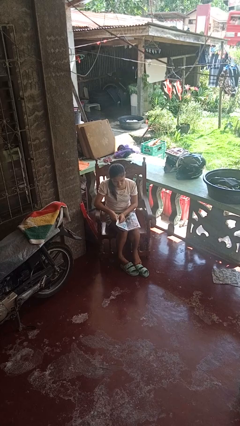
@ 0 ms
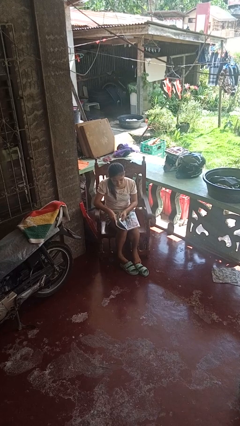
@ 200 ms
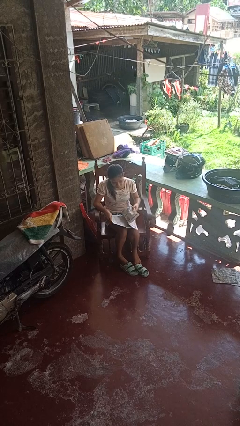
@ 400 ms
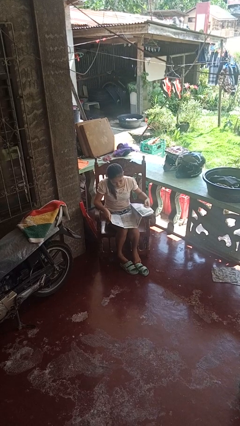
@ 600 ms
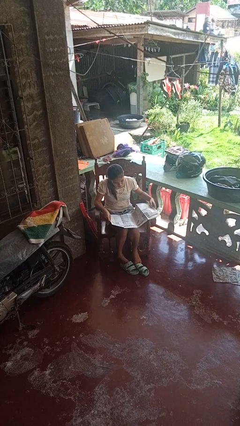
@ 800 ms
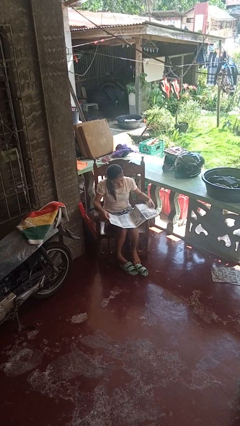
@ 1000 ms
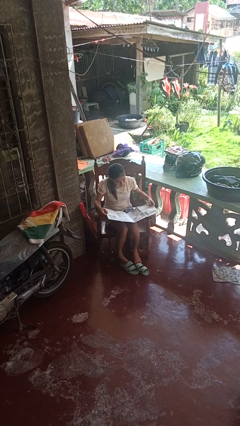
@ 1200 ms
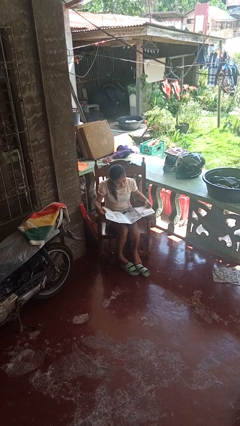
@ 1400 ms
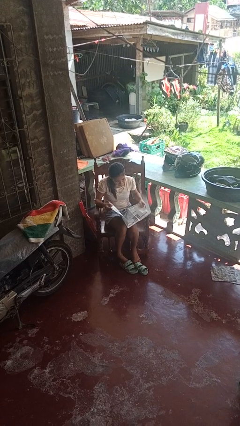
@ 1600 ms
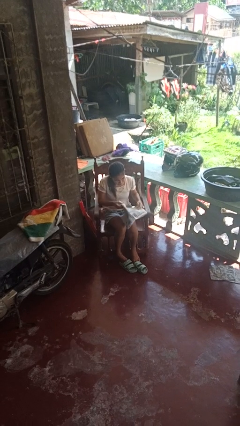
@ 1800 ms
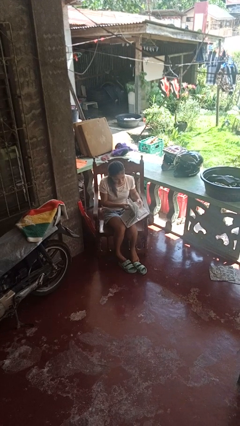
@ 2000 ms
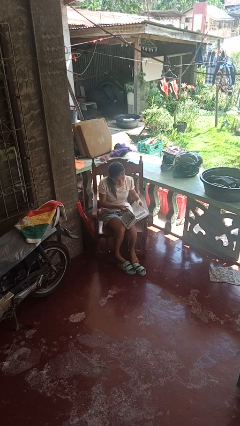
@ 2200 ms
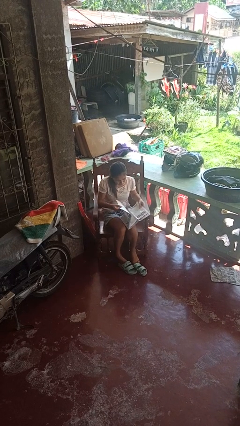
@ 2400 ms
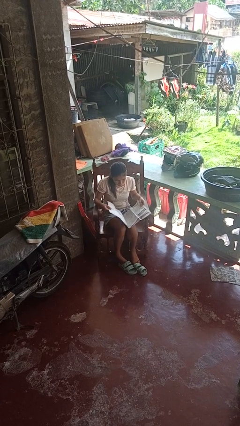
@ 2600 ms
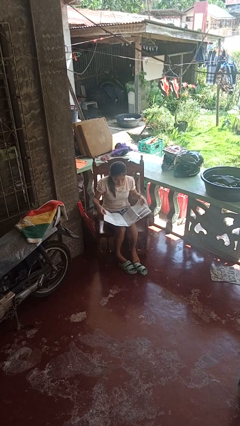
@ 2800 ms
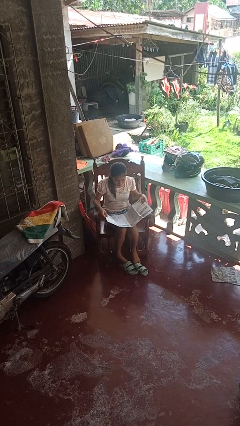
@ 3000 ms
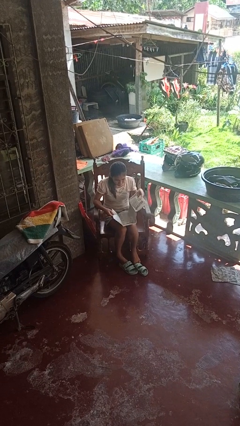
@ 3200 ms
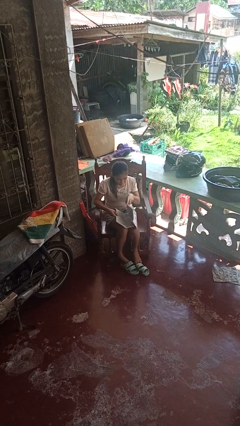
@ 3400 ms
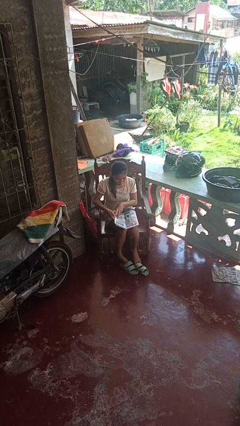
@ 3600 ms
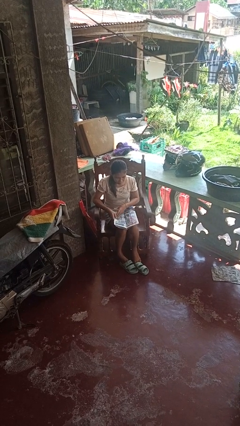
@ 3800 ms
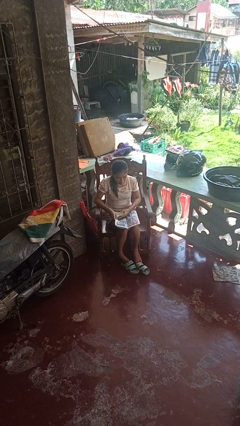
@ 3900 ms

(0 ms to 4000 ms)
person reads newspaper

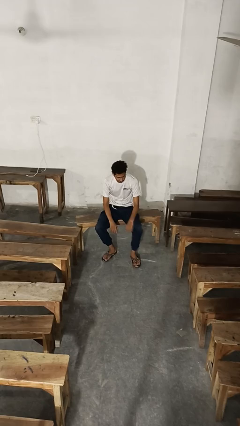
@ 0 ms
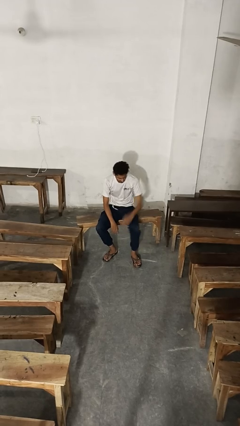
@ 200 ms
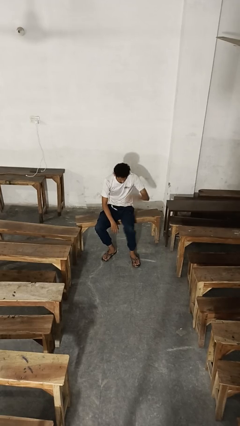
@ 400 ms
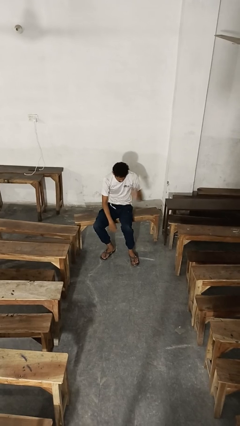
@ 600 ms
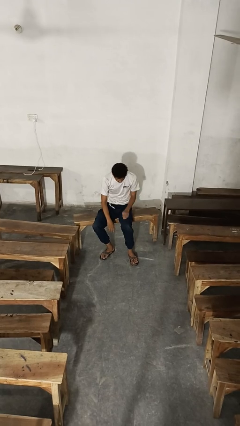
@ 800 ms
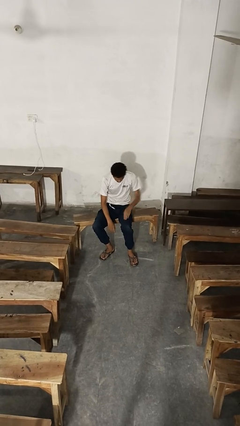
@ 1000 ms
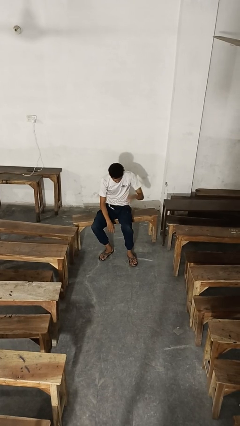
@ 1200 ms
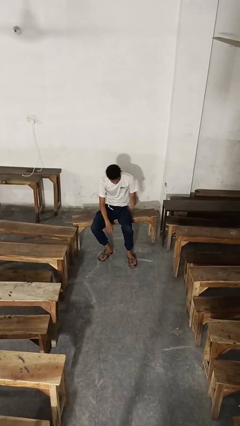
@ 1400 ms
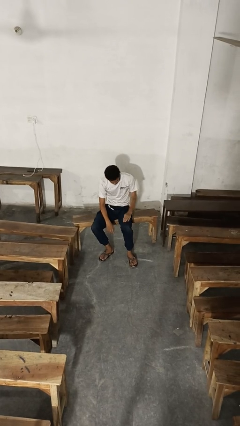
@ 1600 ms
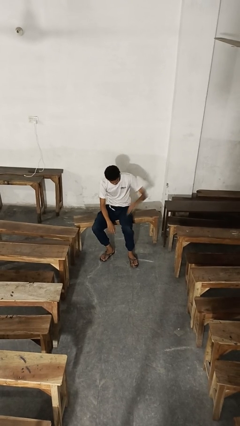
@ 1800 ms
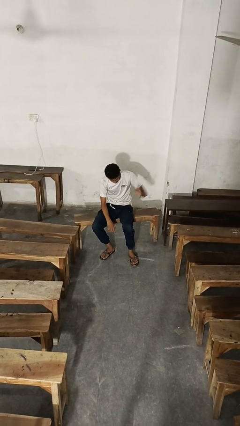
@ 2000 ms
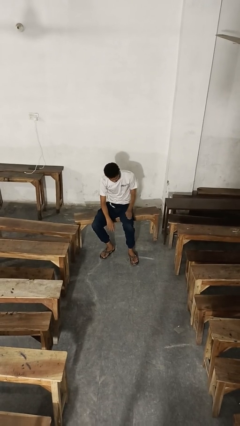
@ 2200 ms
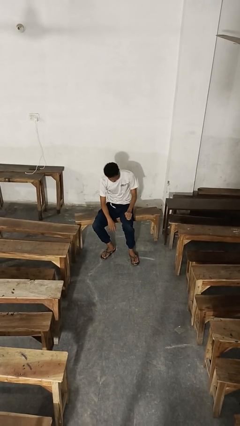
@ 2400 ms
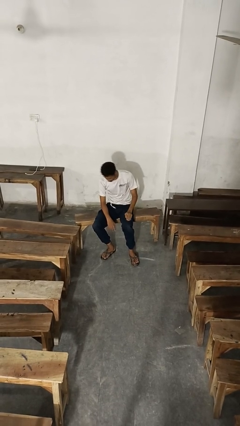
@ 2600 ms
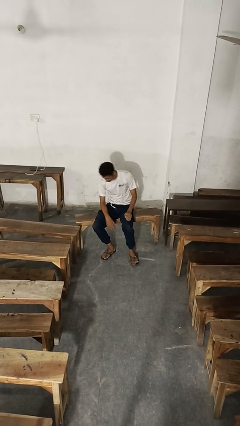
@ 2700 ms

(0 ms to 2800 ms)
person slaps hands on thighs

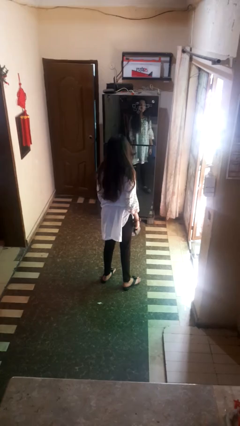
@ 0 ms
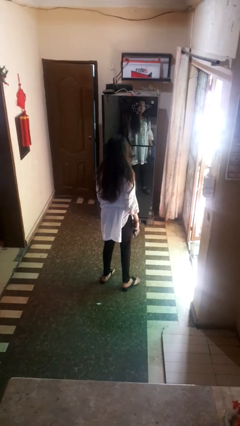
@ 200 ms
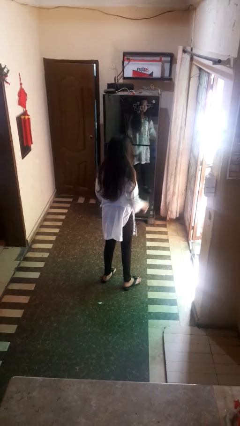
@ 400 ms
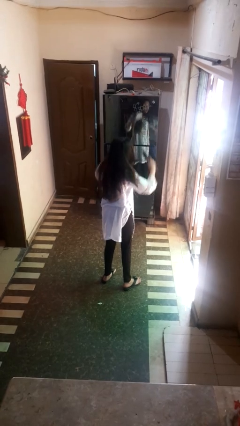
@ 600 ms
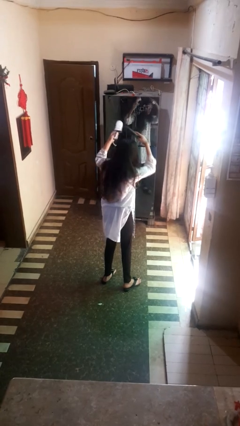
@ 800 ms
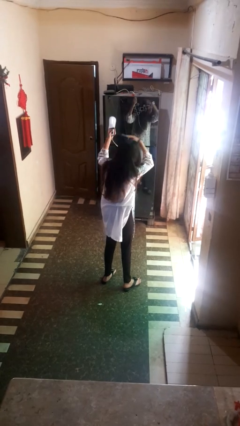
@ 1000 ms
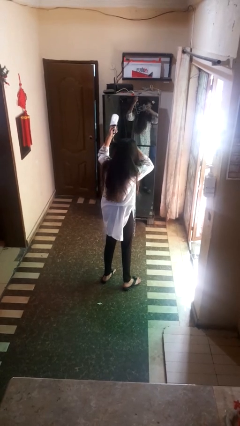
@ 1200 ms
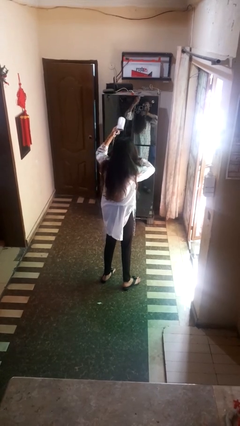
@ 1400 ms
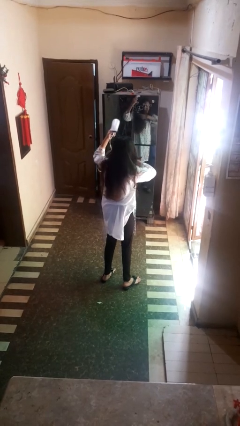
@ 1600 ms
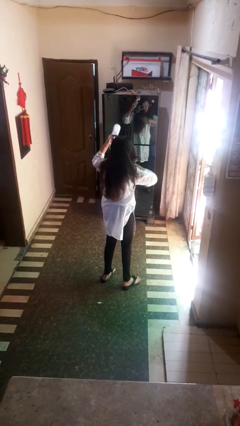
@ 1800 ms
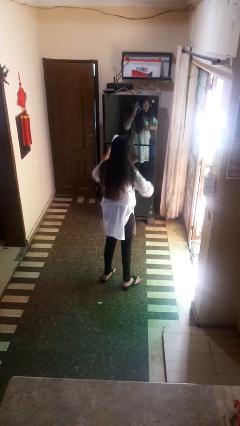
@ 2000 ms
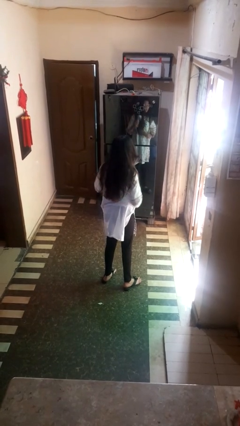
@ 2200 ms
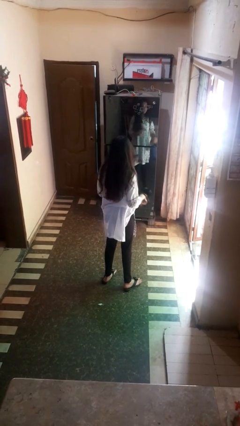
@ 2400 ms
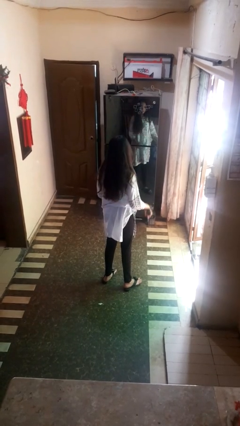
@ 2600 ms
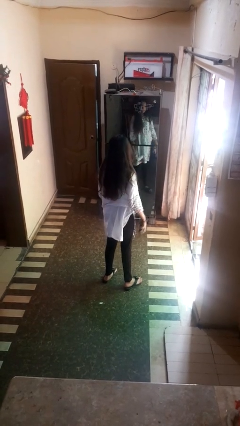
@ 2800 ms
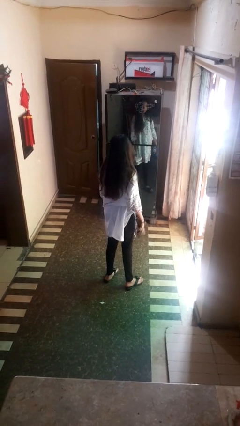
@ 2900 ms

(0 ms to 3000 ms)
person dries hair with hairdryer

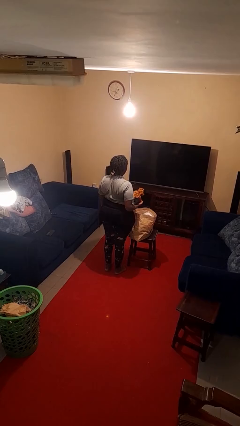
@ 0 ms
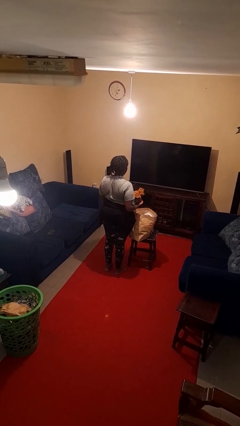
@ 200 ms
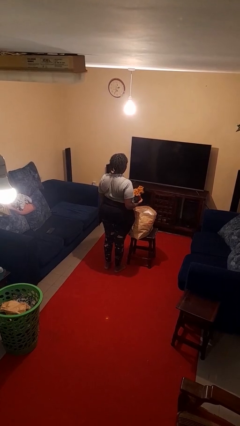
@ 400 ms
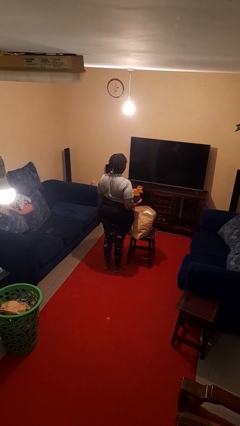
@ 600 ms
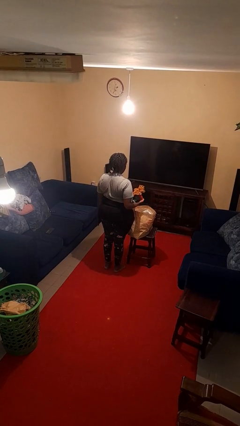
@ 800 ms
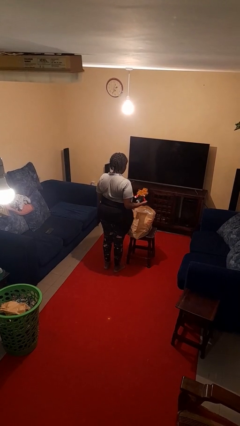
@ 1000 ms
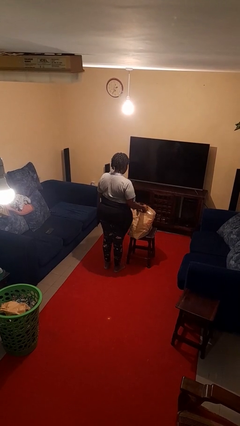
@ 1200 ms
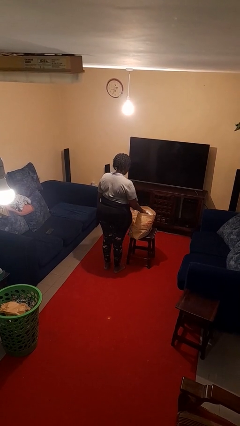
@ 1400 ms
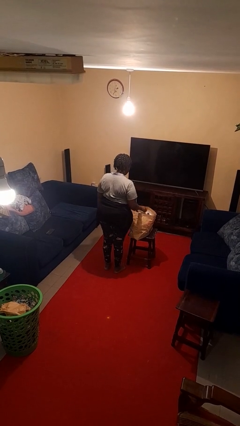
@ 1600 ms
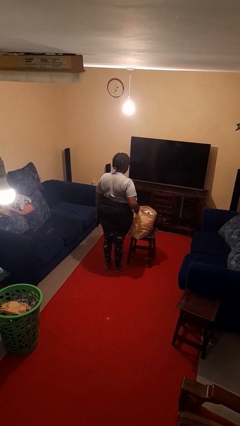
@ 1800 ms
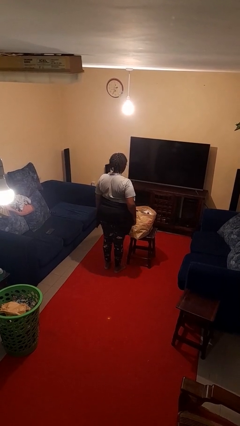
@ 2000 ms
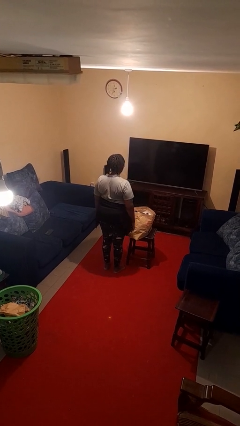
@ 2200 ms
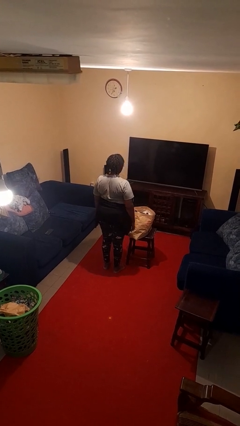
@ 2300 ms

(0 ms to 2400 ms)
person puts object into bag

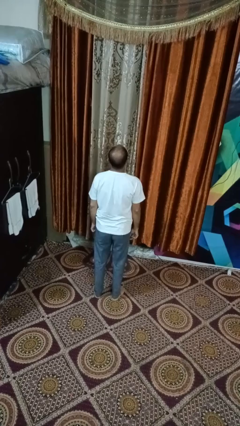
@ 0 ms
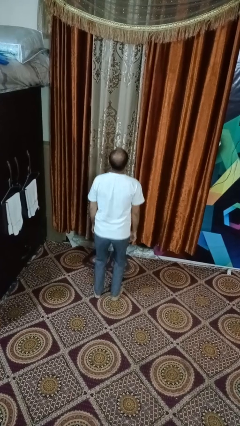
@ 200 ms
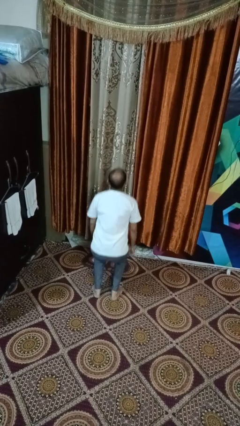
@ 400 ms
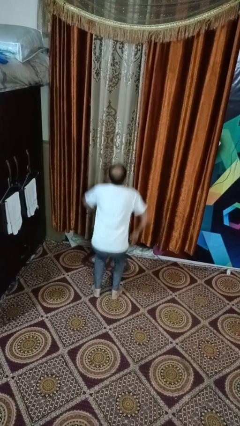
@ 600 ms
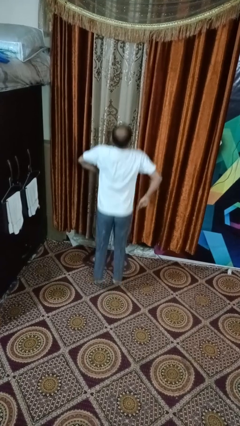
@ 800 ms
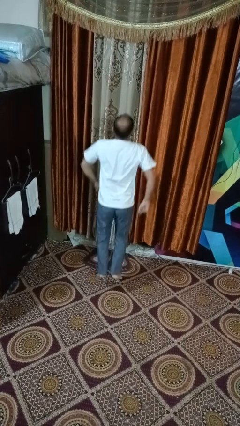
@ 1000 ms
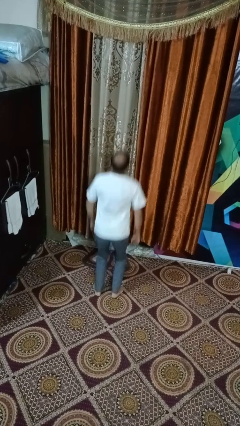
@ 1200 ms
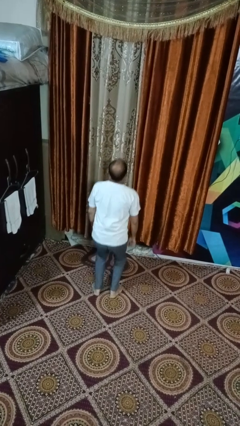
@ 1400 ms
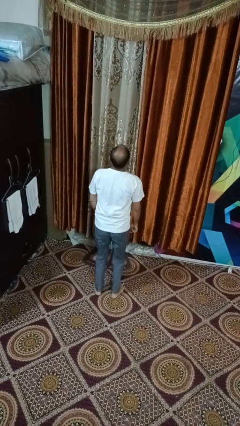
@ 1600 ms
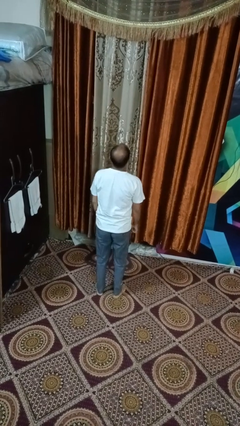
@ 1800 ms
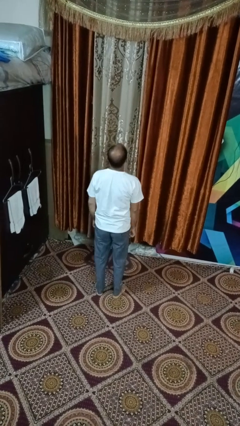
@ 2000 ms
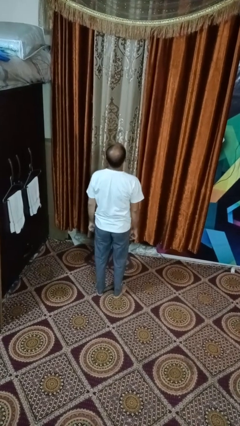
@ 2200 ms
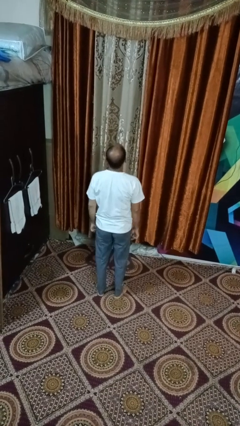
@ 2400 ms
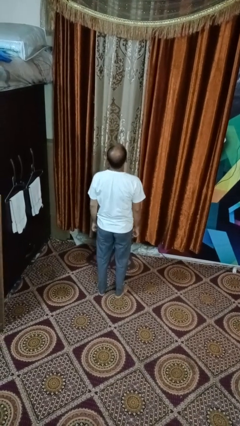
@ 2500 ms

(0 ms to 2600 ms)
person jumps

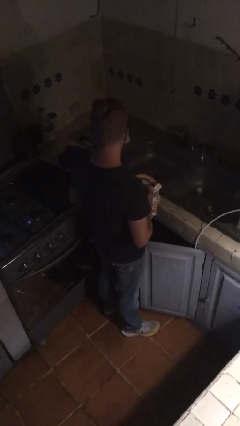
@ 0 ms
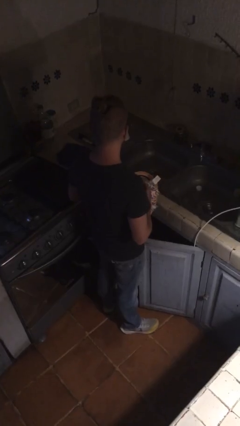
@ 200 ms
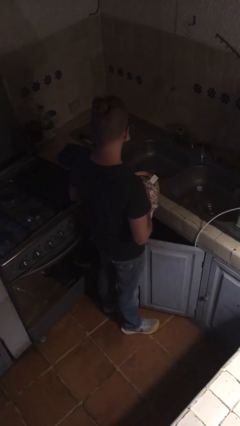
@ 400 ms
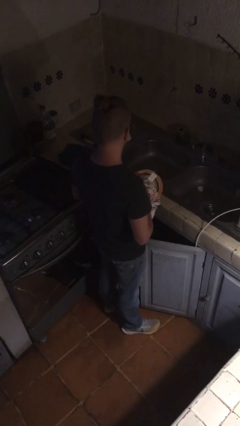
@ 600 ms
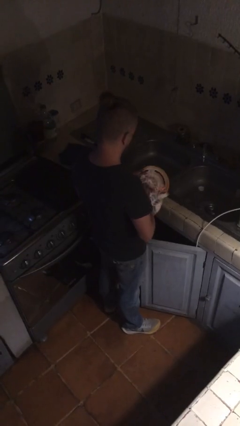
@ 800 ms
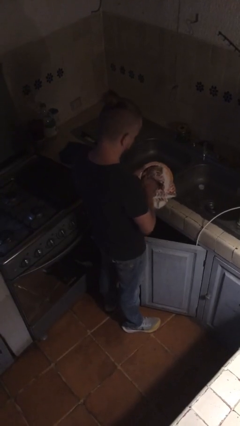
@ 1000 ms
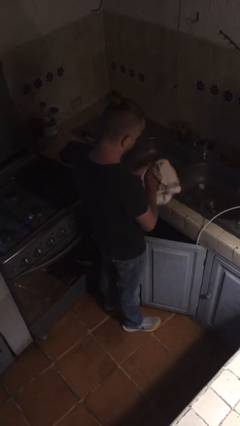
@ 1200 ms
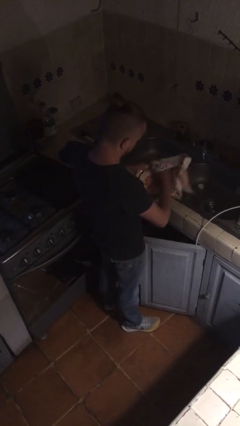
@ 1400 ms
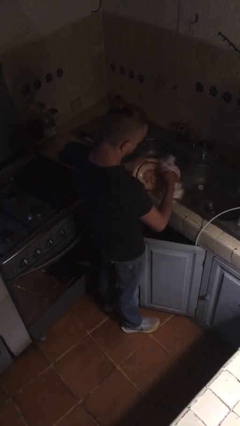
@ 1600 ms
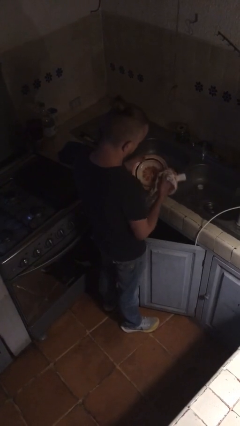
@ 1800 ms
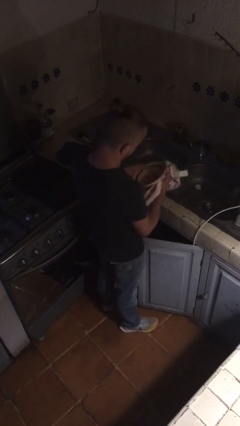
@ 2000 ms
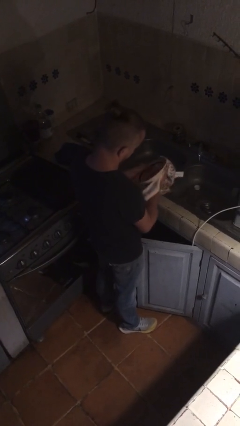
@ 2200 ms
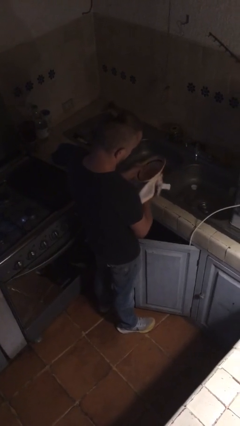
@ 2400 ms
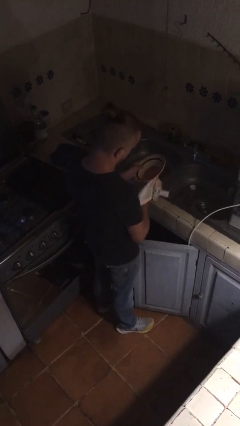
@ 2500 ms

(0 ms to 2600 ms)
person dries dish

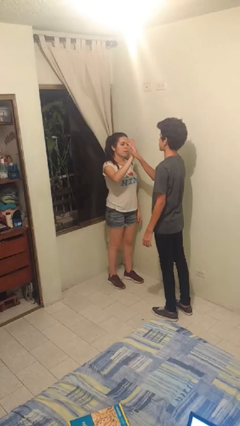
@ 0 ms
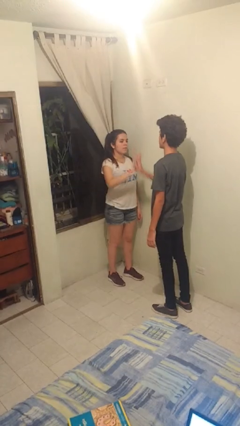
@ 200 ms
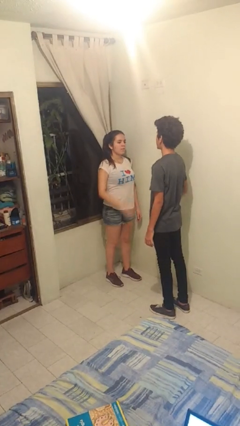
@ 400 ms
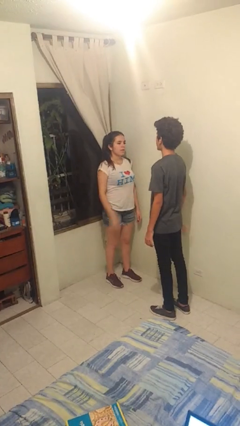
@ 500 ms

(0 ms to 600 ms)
person highfives hand
